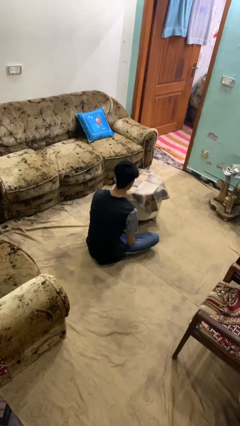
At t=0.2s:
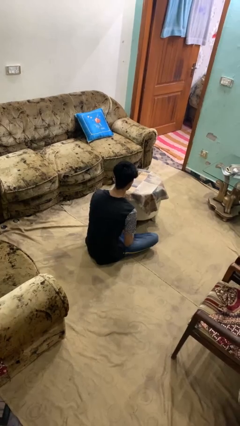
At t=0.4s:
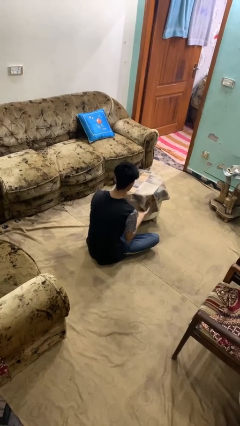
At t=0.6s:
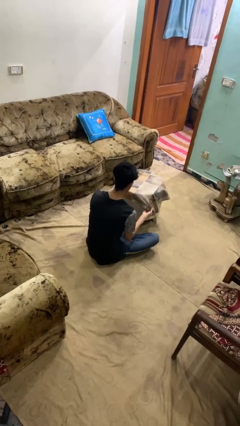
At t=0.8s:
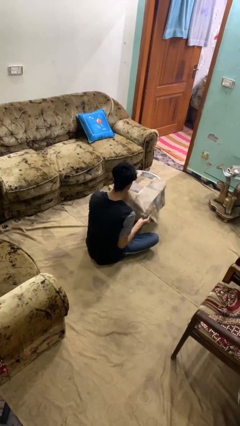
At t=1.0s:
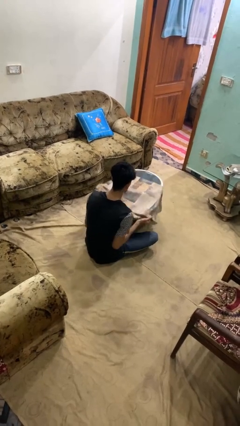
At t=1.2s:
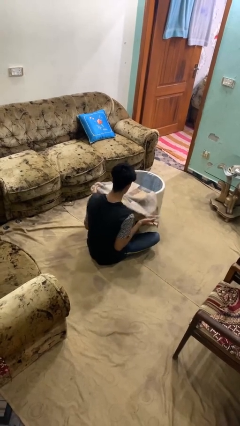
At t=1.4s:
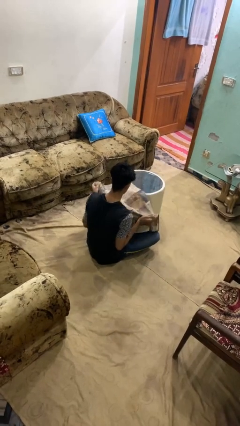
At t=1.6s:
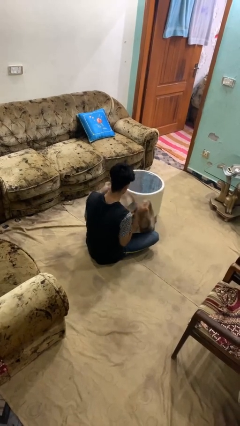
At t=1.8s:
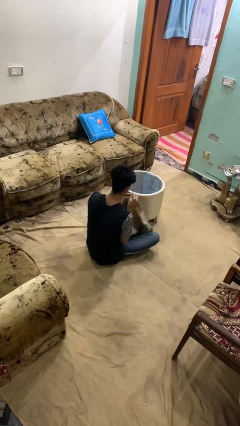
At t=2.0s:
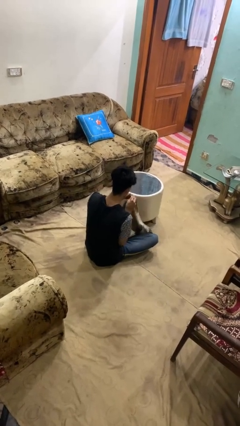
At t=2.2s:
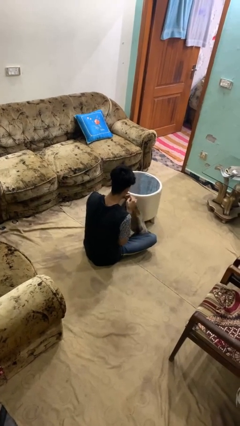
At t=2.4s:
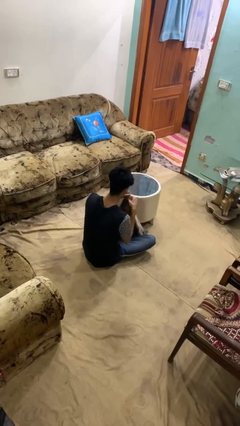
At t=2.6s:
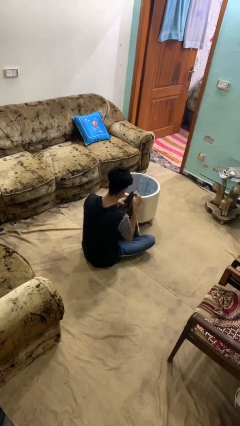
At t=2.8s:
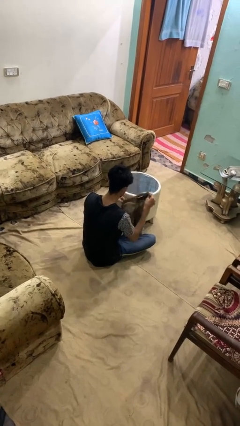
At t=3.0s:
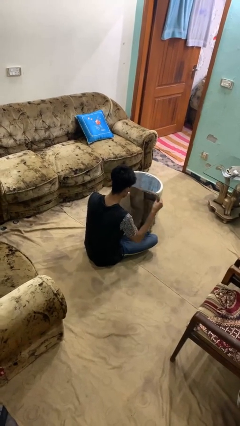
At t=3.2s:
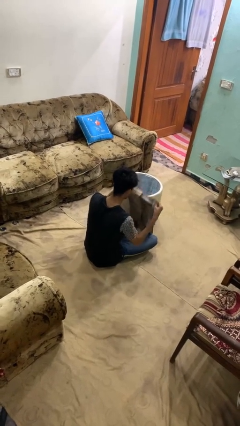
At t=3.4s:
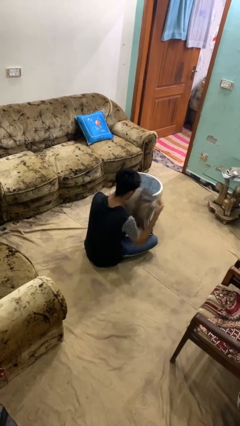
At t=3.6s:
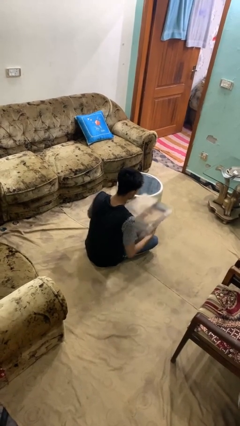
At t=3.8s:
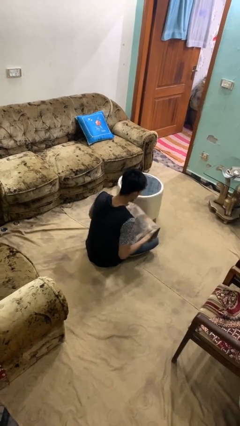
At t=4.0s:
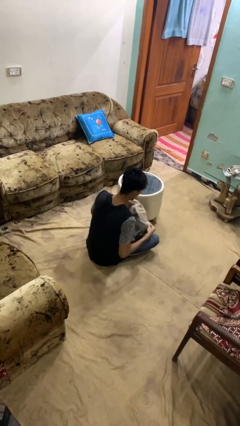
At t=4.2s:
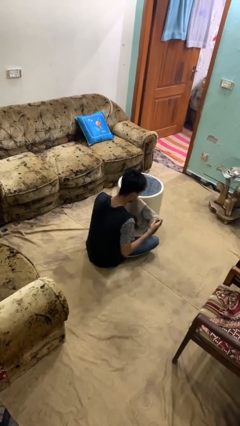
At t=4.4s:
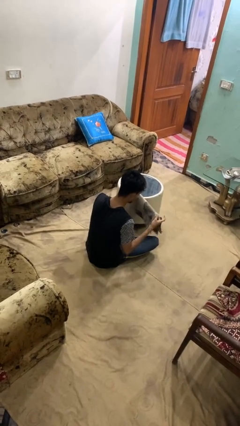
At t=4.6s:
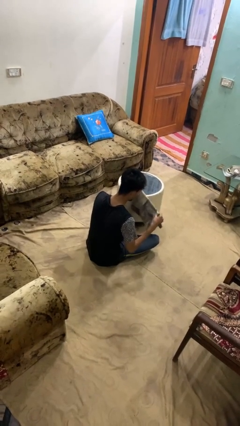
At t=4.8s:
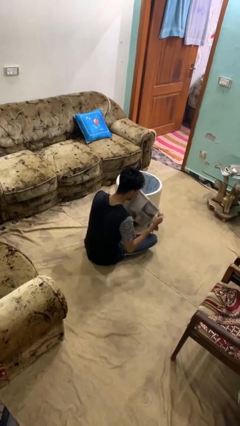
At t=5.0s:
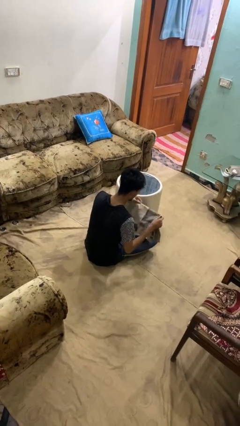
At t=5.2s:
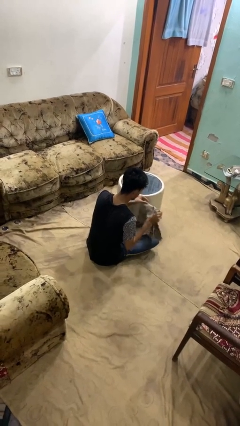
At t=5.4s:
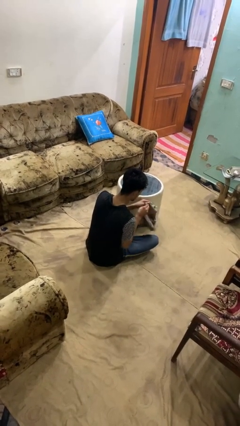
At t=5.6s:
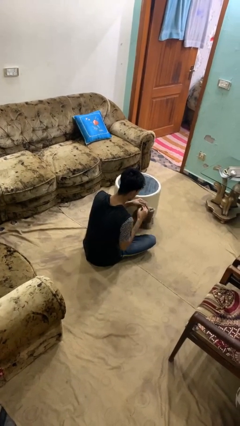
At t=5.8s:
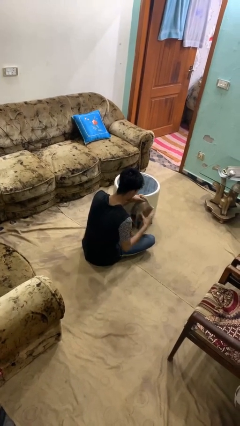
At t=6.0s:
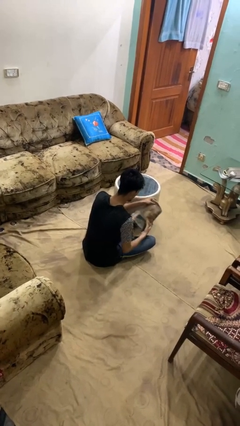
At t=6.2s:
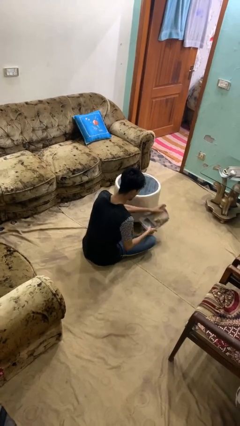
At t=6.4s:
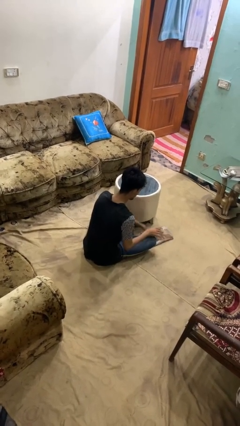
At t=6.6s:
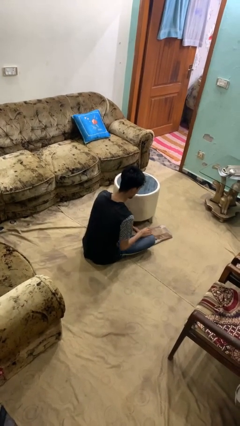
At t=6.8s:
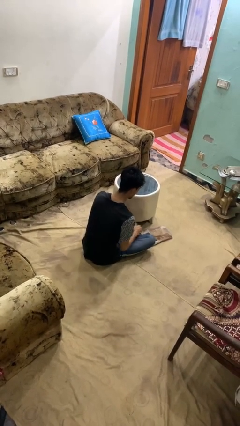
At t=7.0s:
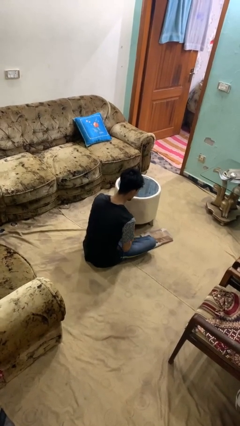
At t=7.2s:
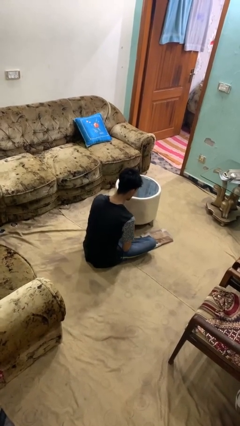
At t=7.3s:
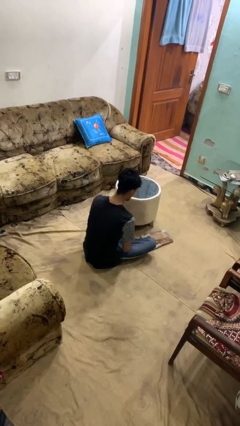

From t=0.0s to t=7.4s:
person folds tablecloth

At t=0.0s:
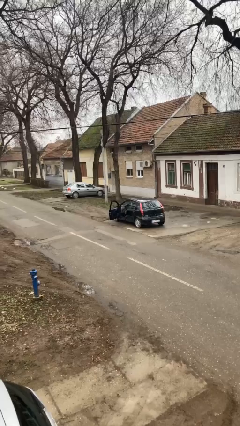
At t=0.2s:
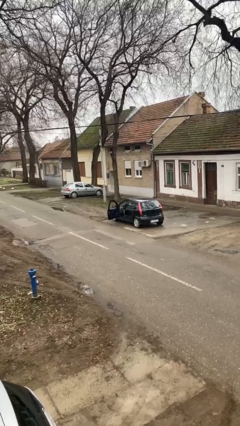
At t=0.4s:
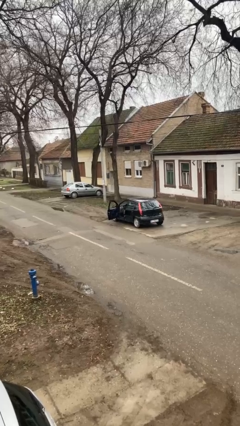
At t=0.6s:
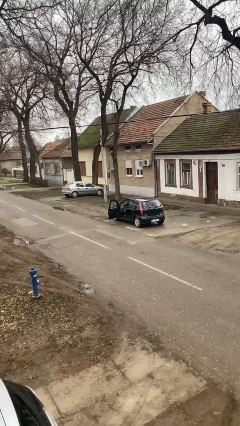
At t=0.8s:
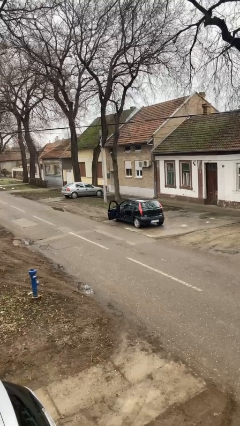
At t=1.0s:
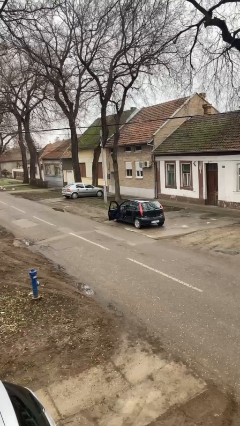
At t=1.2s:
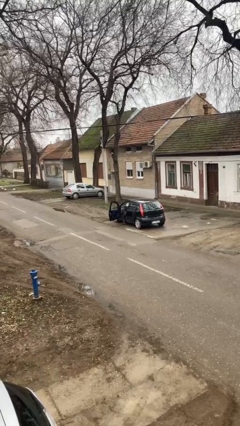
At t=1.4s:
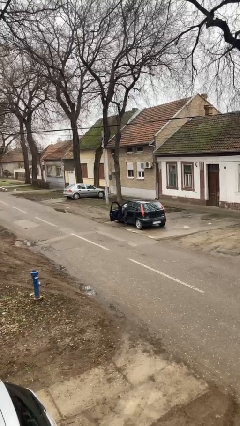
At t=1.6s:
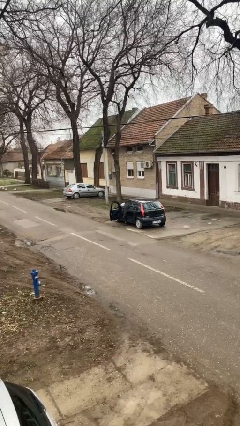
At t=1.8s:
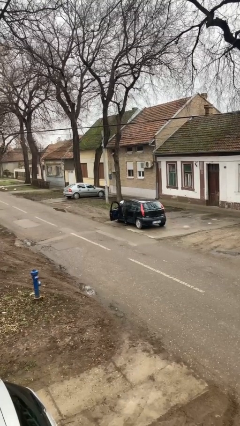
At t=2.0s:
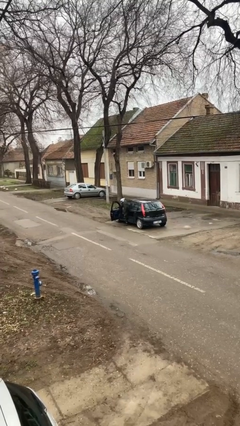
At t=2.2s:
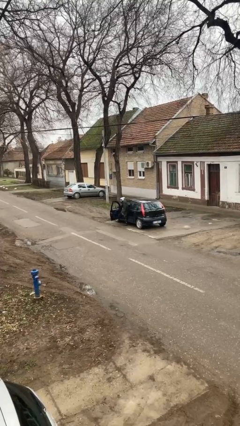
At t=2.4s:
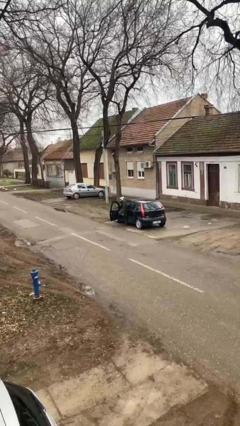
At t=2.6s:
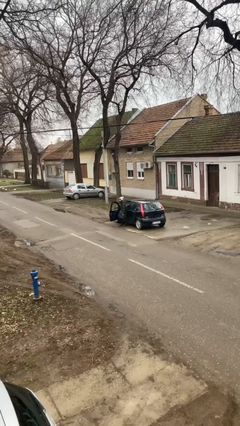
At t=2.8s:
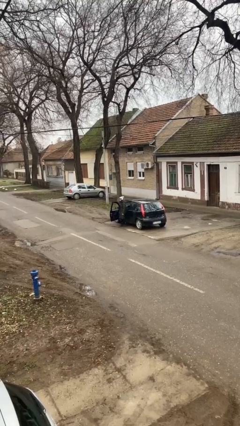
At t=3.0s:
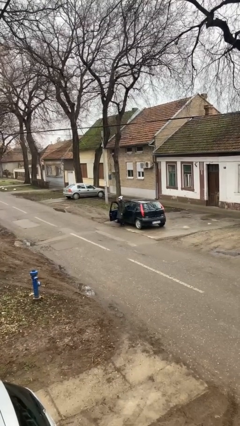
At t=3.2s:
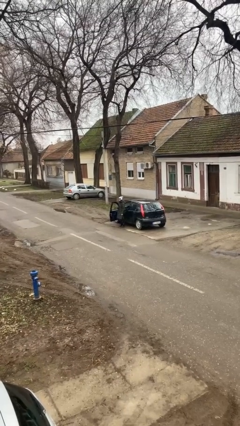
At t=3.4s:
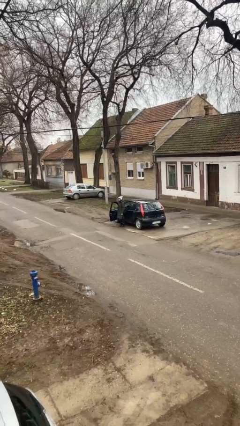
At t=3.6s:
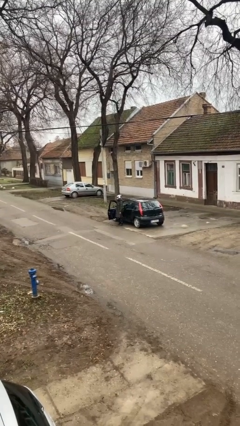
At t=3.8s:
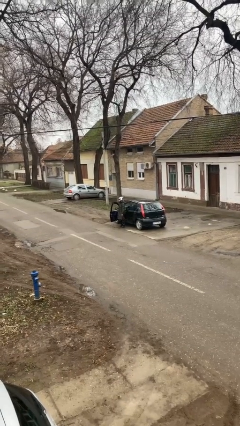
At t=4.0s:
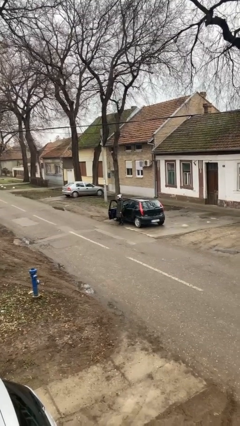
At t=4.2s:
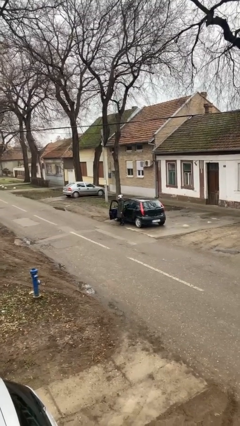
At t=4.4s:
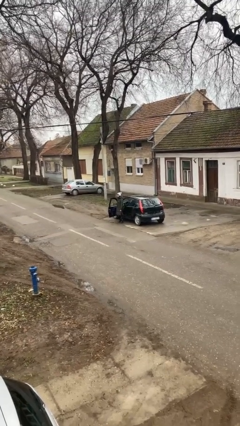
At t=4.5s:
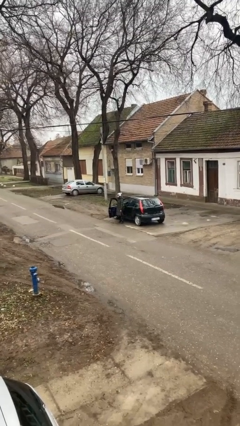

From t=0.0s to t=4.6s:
person exits car

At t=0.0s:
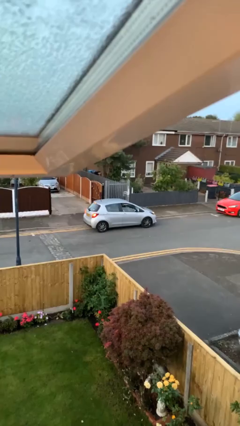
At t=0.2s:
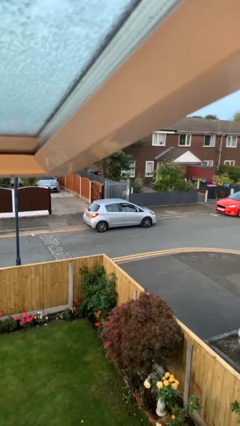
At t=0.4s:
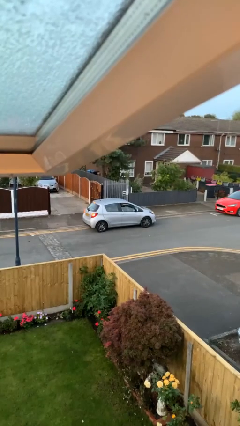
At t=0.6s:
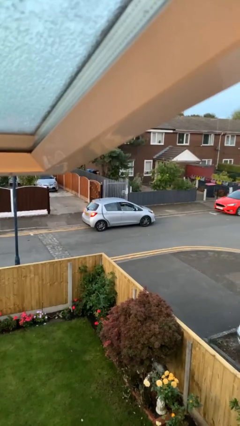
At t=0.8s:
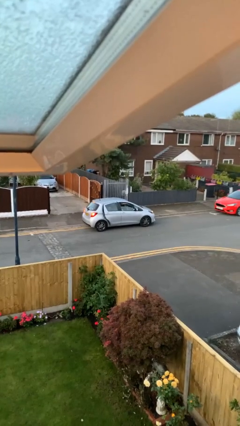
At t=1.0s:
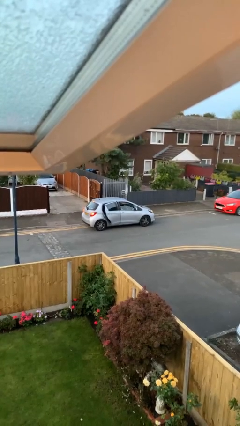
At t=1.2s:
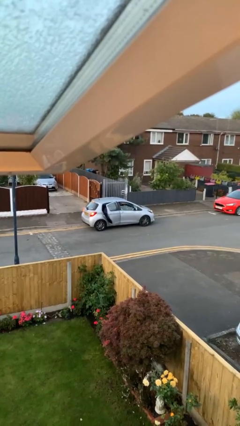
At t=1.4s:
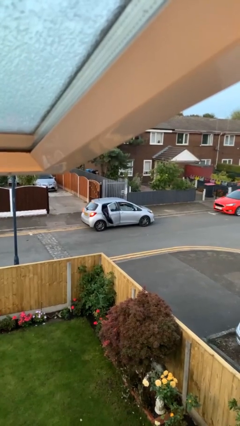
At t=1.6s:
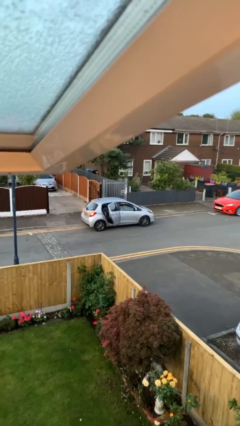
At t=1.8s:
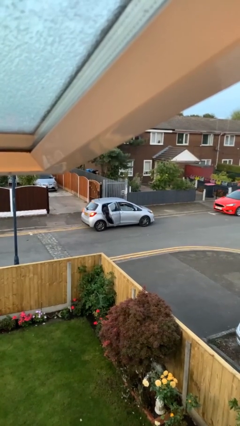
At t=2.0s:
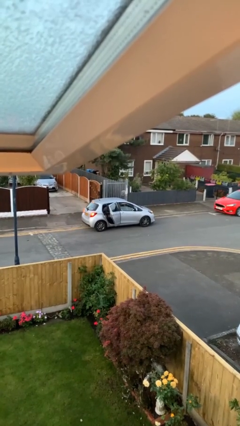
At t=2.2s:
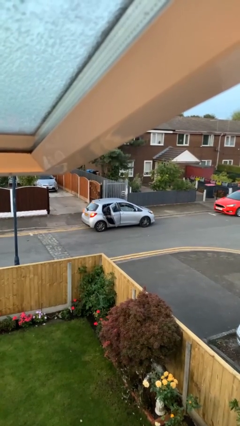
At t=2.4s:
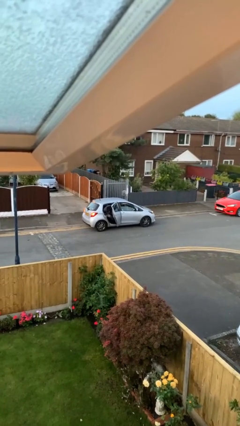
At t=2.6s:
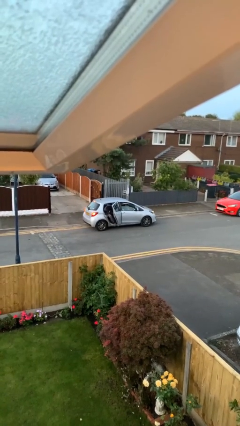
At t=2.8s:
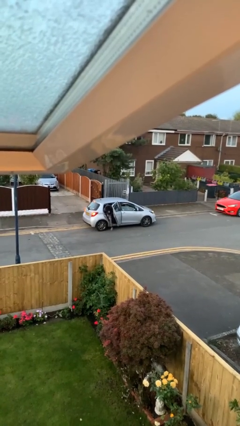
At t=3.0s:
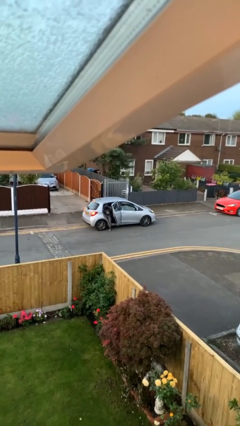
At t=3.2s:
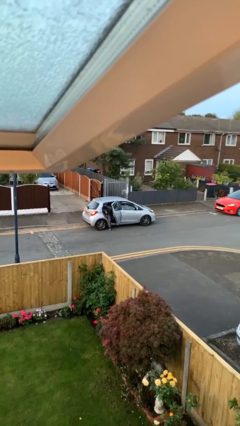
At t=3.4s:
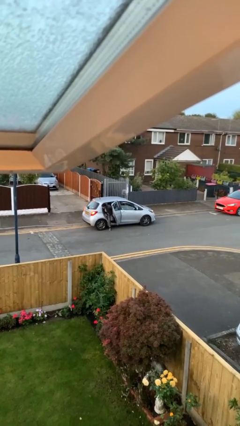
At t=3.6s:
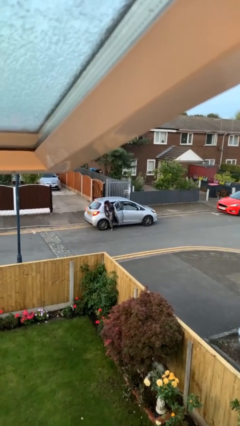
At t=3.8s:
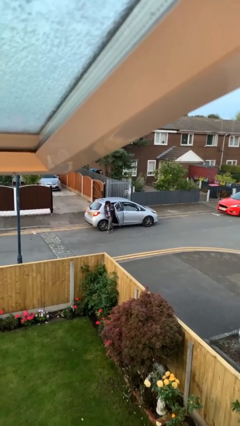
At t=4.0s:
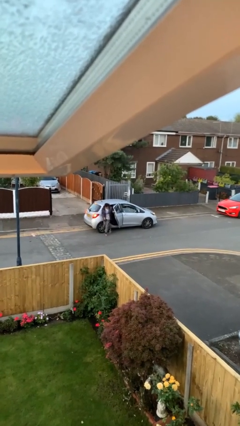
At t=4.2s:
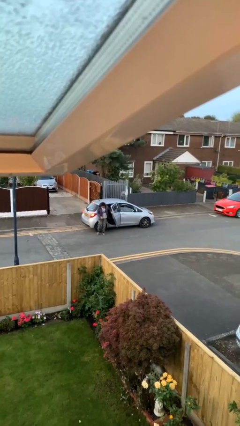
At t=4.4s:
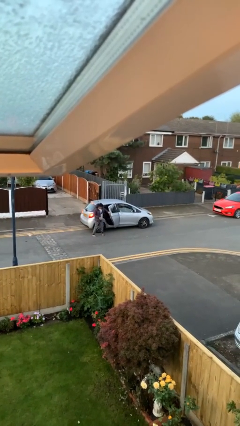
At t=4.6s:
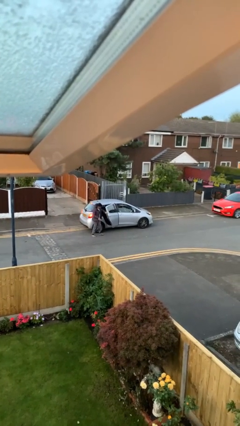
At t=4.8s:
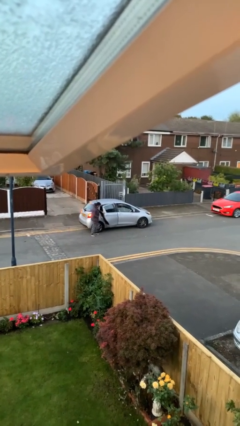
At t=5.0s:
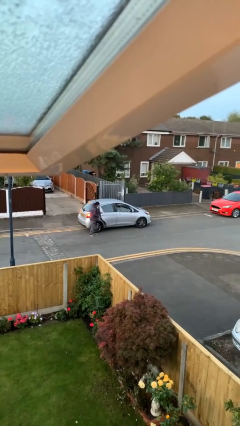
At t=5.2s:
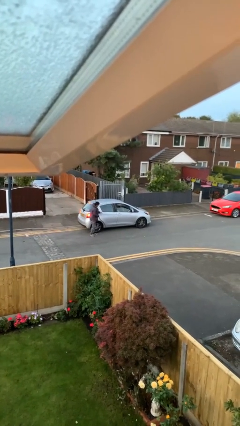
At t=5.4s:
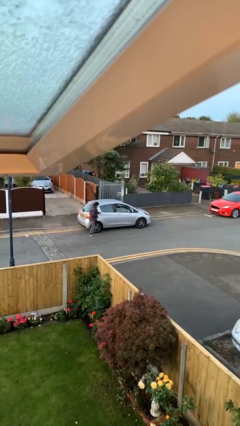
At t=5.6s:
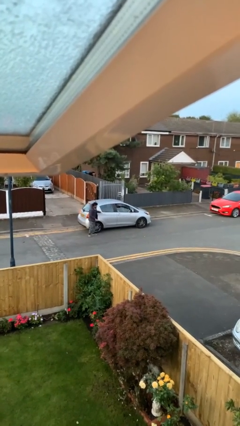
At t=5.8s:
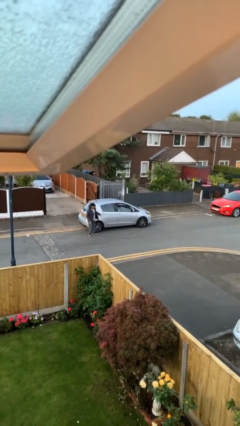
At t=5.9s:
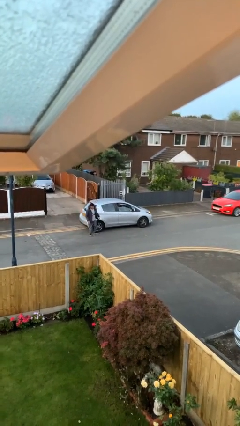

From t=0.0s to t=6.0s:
car drops off person
